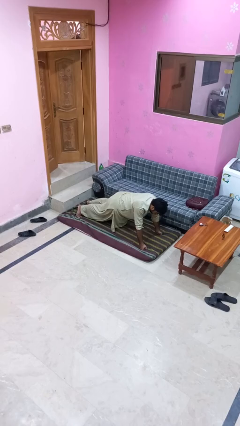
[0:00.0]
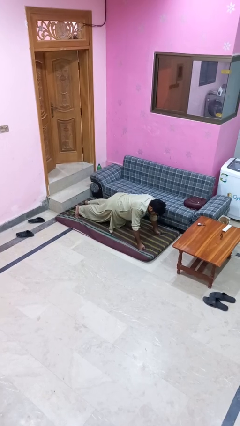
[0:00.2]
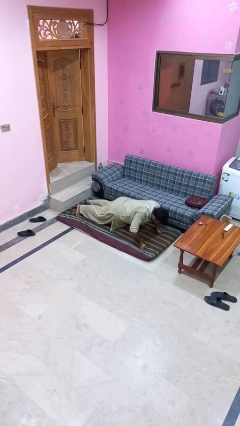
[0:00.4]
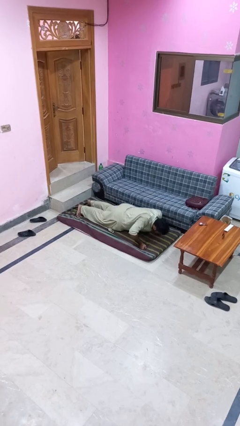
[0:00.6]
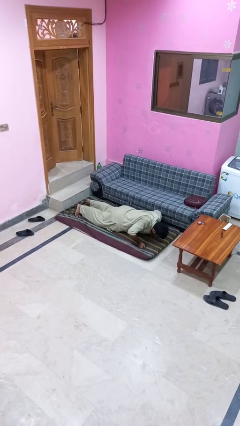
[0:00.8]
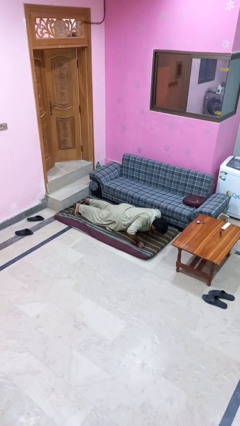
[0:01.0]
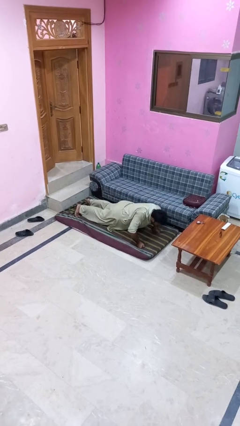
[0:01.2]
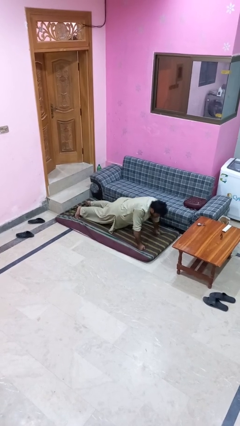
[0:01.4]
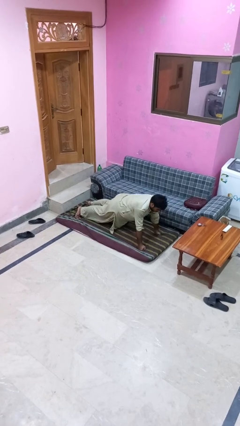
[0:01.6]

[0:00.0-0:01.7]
person exercises with pushup

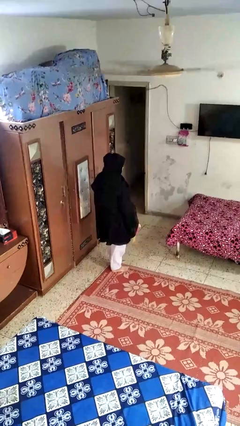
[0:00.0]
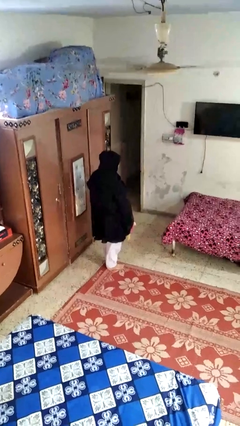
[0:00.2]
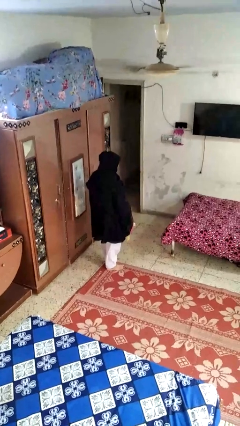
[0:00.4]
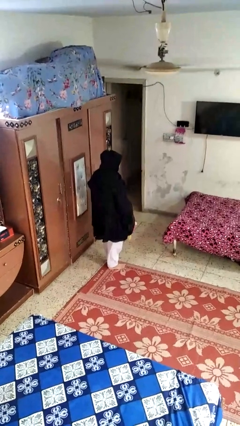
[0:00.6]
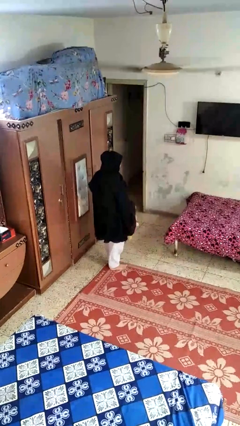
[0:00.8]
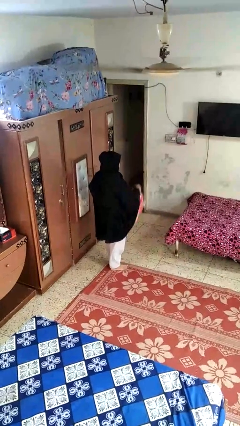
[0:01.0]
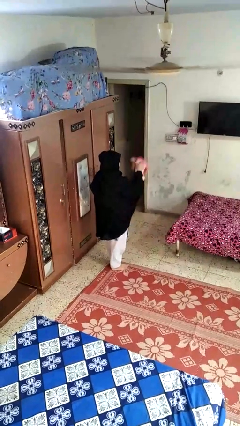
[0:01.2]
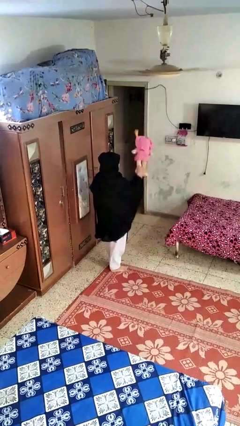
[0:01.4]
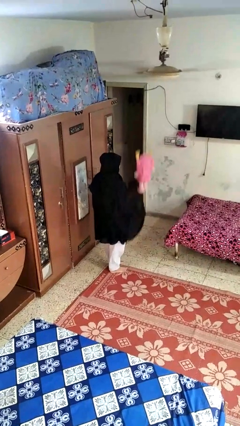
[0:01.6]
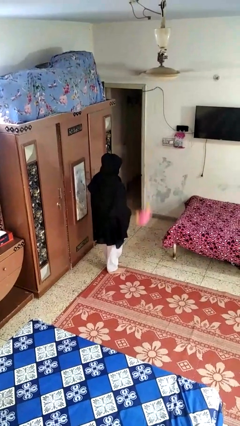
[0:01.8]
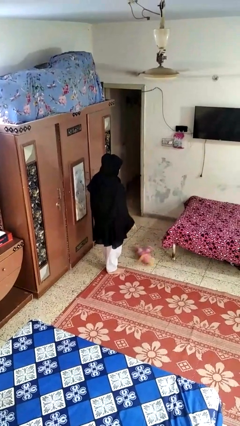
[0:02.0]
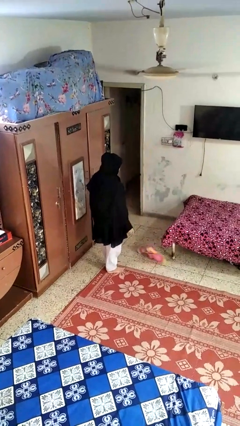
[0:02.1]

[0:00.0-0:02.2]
person throws object into air

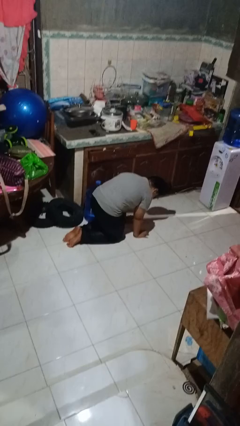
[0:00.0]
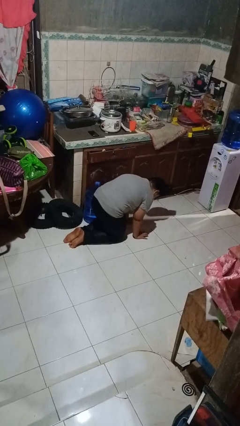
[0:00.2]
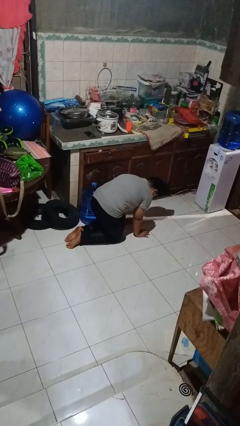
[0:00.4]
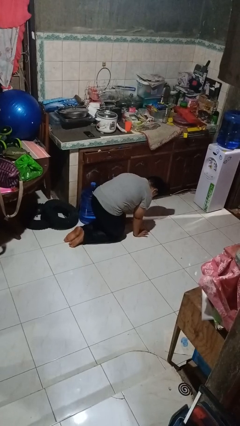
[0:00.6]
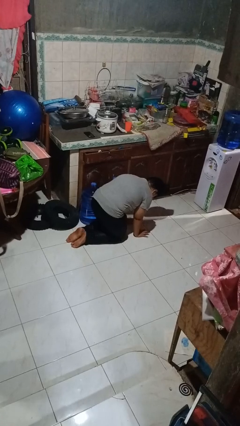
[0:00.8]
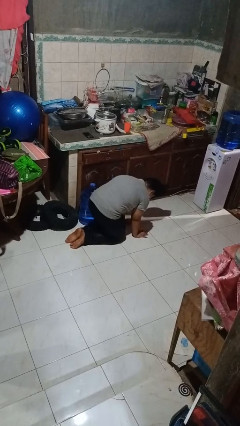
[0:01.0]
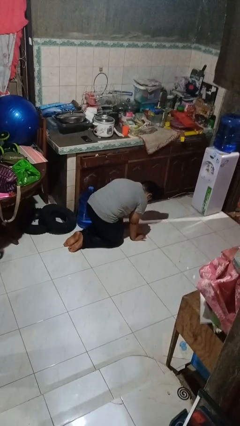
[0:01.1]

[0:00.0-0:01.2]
person crawls

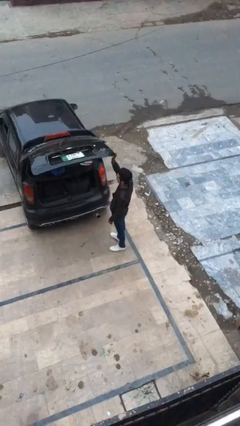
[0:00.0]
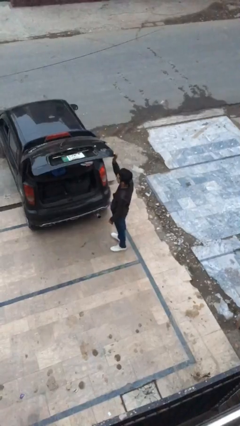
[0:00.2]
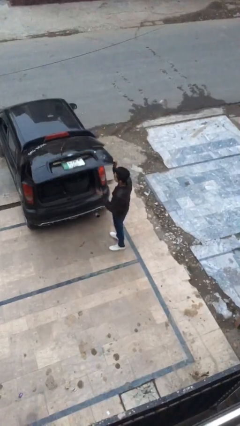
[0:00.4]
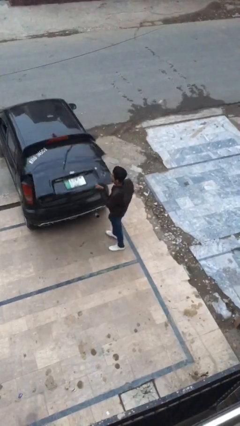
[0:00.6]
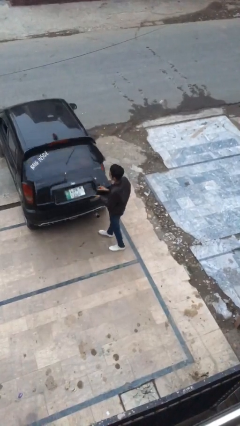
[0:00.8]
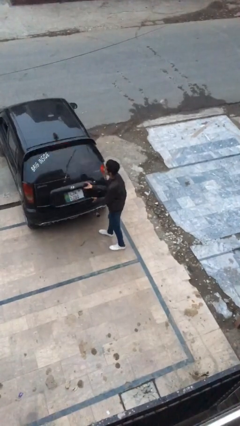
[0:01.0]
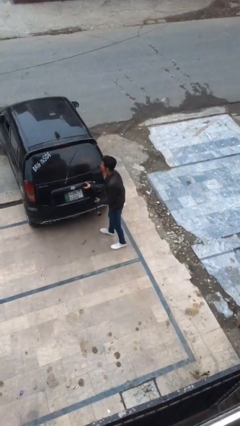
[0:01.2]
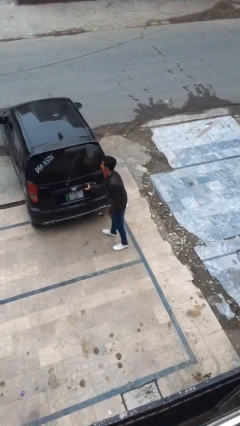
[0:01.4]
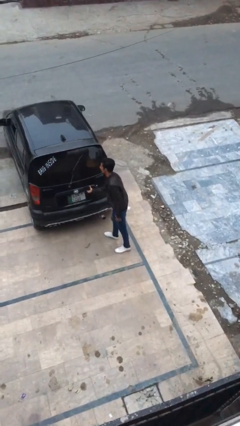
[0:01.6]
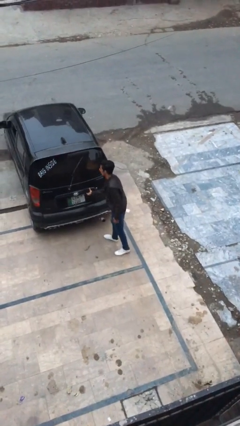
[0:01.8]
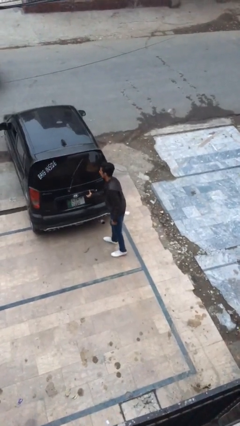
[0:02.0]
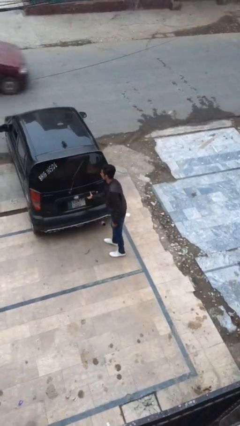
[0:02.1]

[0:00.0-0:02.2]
person closes car trunk

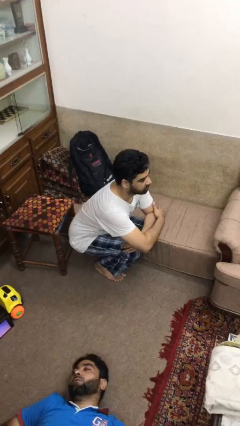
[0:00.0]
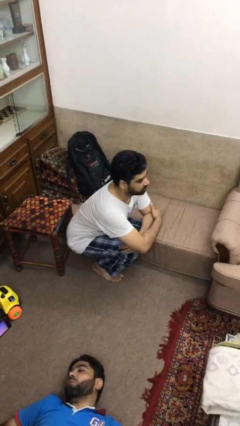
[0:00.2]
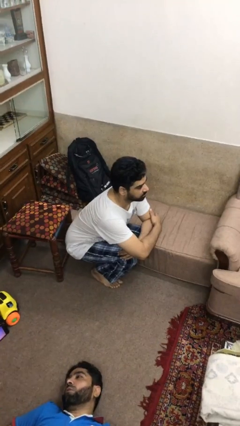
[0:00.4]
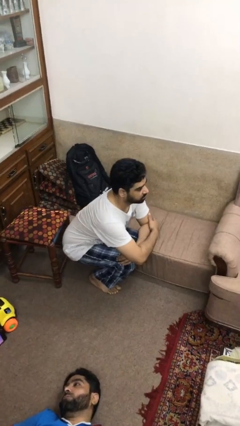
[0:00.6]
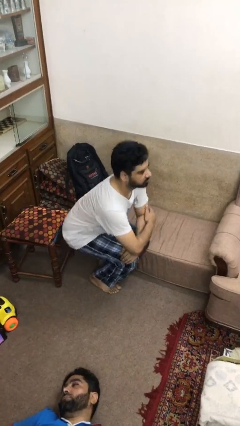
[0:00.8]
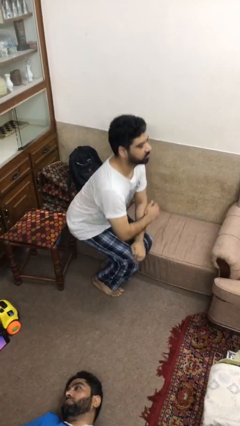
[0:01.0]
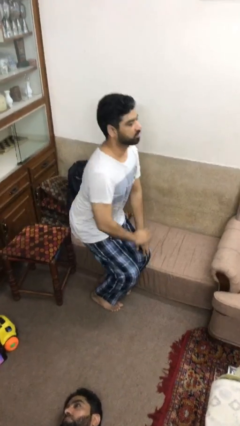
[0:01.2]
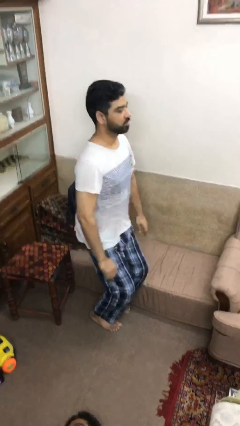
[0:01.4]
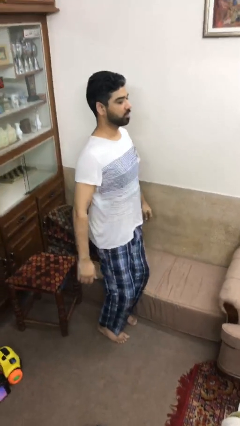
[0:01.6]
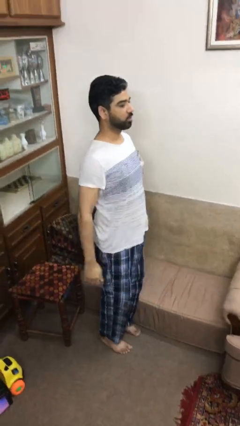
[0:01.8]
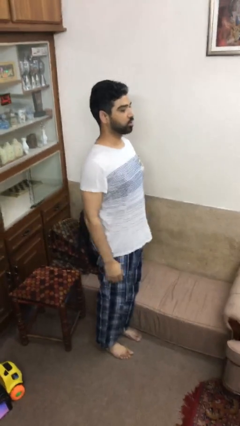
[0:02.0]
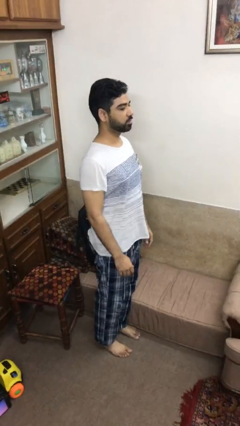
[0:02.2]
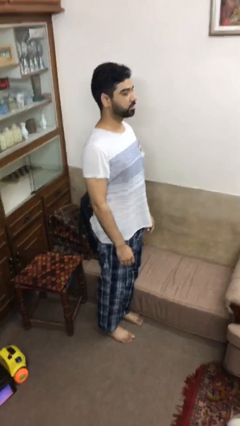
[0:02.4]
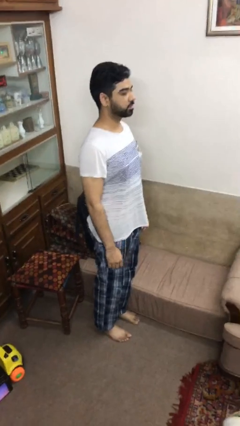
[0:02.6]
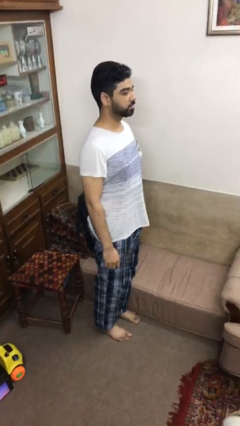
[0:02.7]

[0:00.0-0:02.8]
person stands up

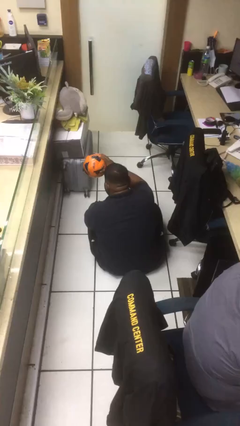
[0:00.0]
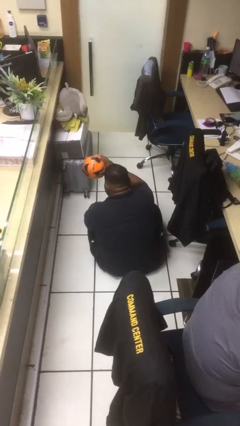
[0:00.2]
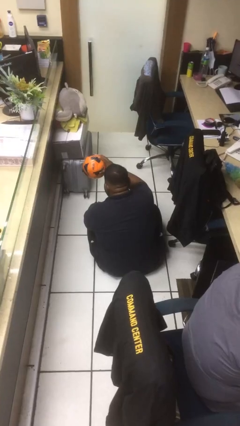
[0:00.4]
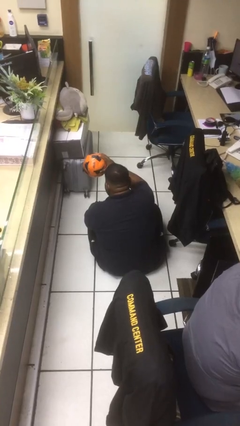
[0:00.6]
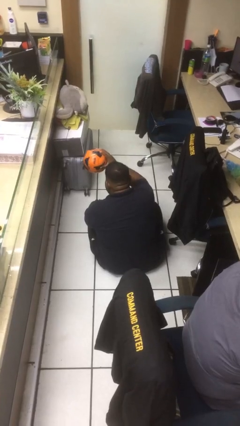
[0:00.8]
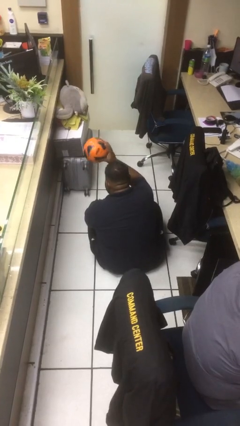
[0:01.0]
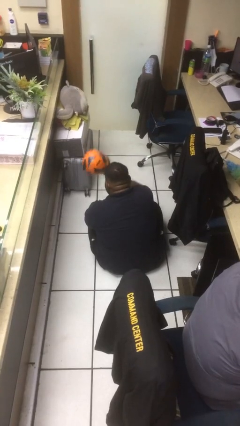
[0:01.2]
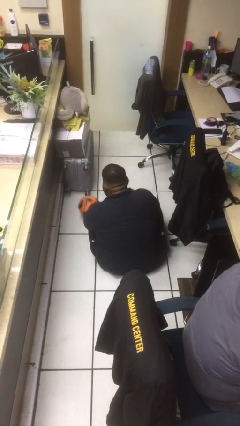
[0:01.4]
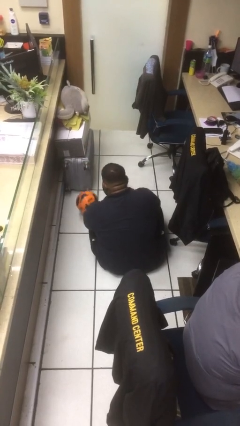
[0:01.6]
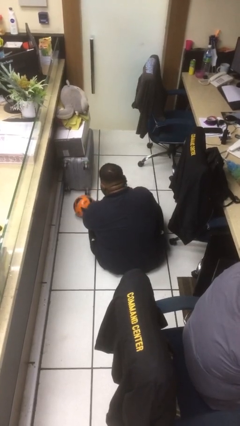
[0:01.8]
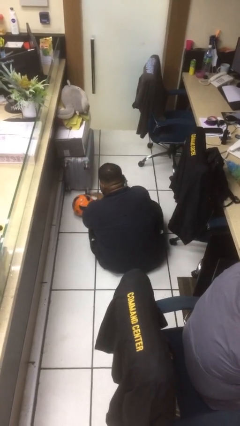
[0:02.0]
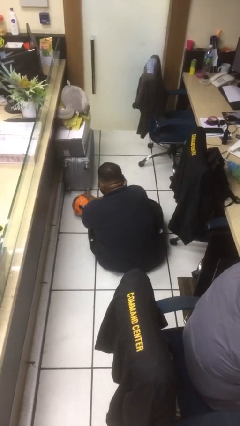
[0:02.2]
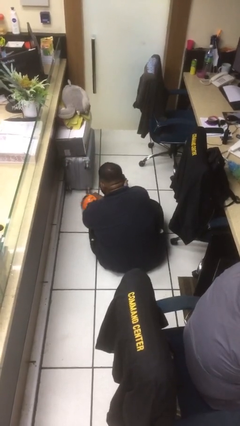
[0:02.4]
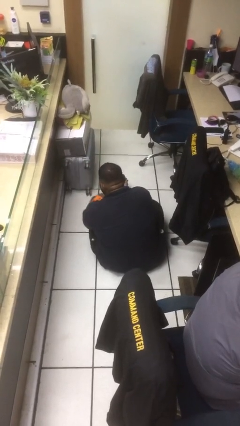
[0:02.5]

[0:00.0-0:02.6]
person bounces ball on floor

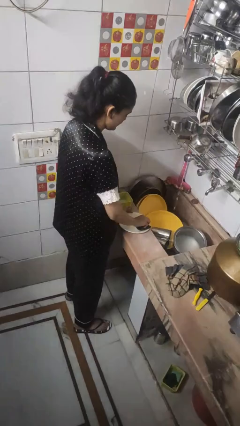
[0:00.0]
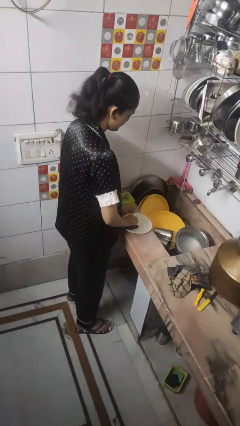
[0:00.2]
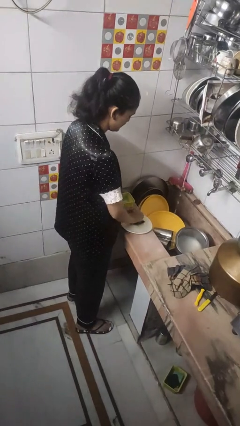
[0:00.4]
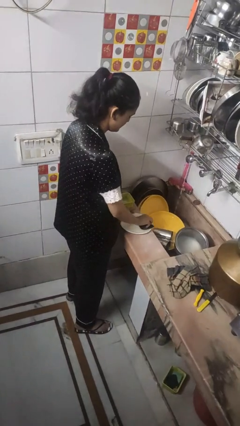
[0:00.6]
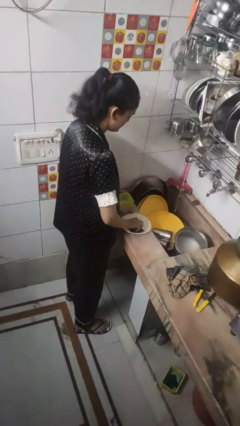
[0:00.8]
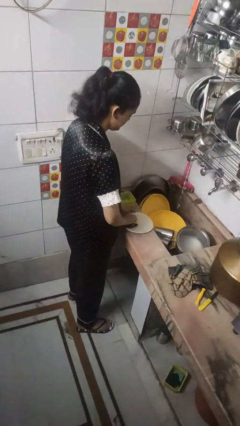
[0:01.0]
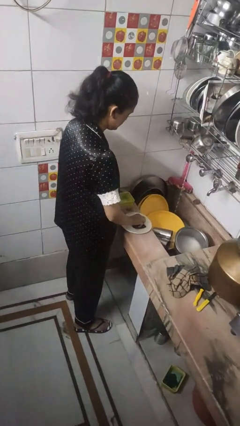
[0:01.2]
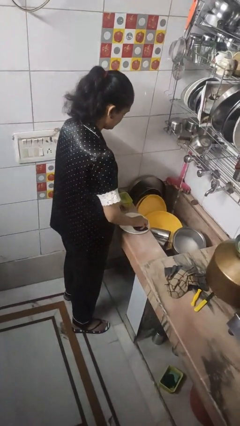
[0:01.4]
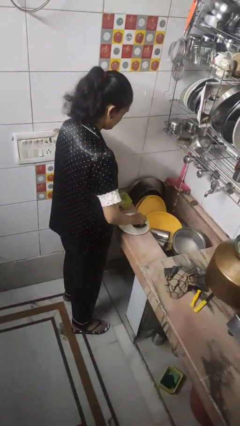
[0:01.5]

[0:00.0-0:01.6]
person washes dish

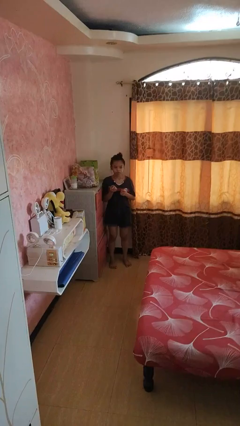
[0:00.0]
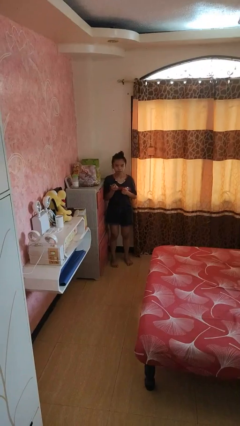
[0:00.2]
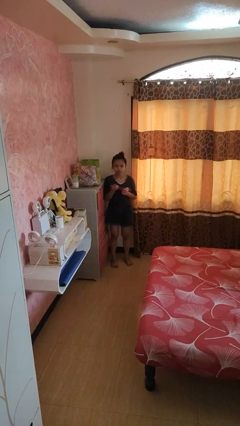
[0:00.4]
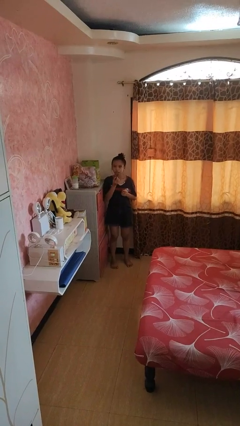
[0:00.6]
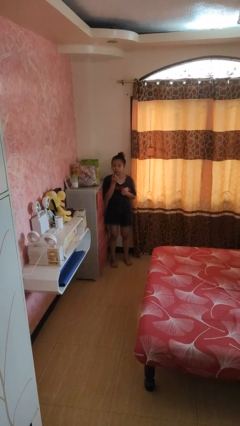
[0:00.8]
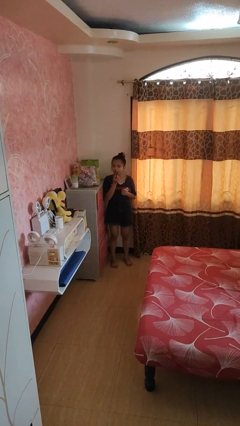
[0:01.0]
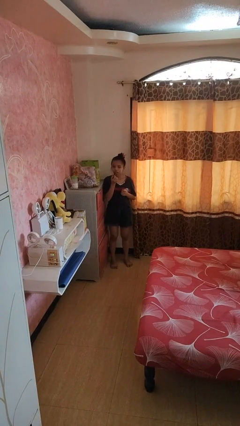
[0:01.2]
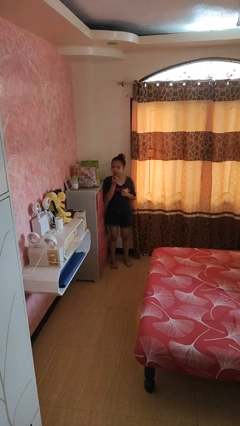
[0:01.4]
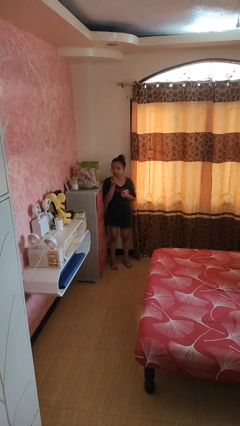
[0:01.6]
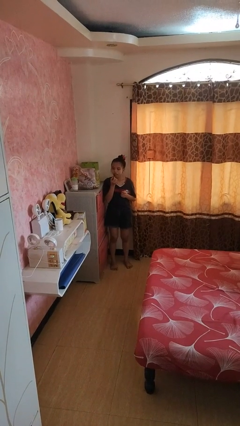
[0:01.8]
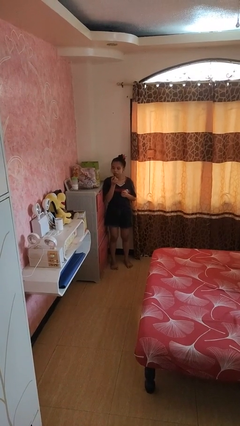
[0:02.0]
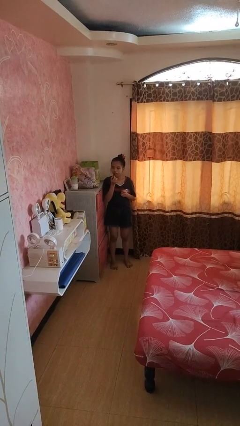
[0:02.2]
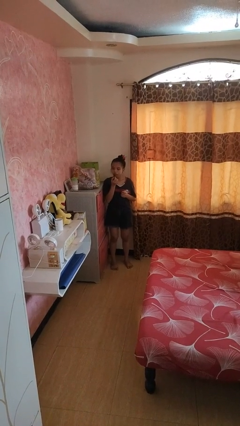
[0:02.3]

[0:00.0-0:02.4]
person applies lip makeup

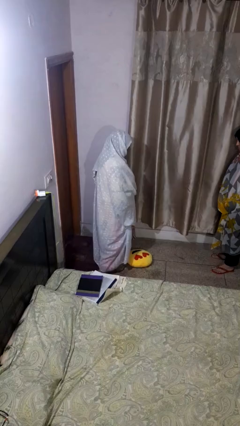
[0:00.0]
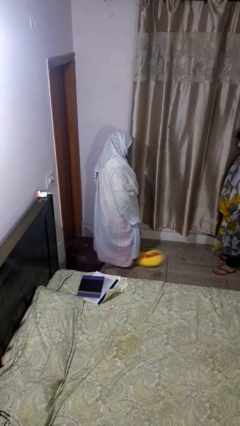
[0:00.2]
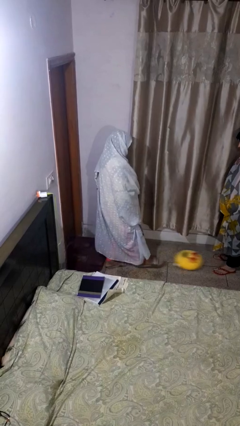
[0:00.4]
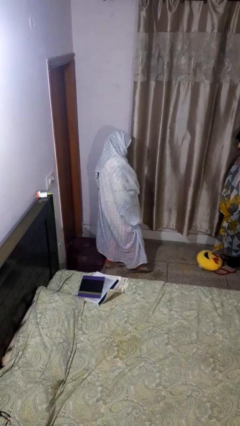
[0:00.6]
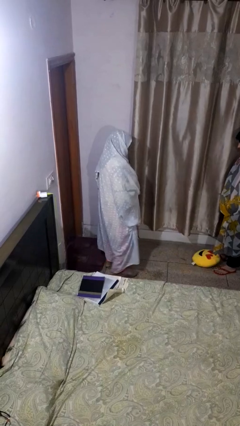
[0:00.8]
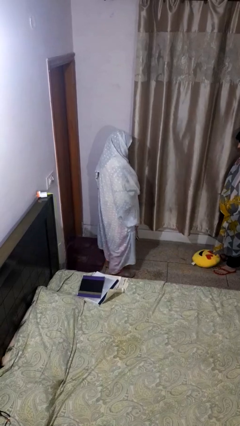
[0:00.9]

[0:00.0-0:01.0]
person kicks object to person
